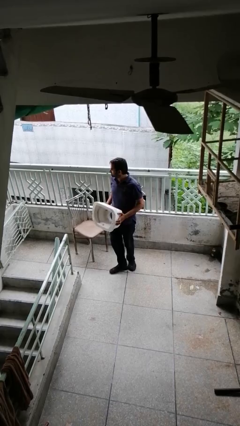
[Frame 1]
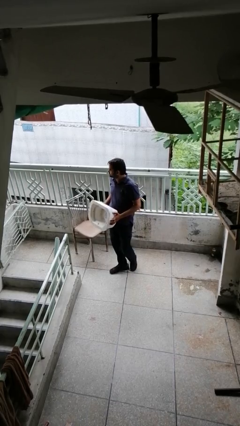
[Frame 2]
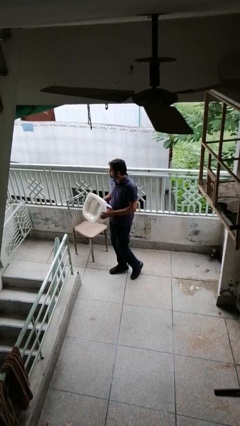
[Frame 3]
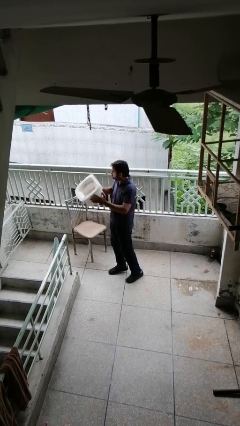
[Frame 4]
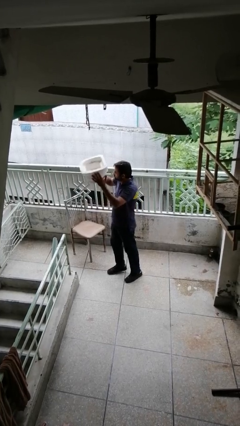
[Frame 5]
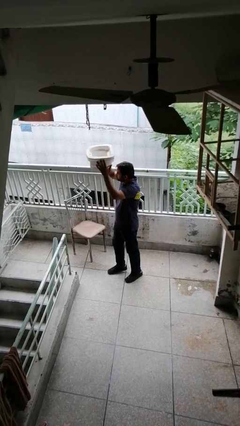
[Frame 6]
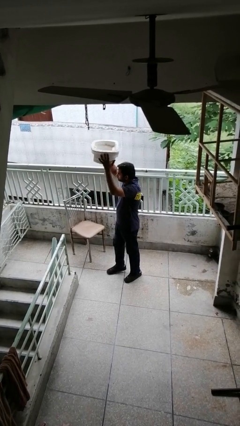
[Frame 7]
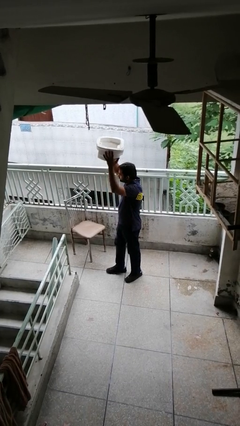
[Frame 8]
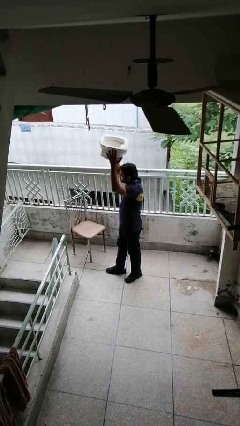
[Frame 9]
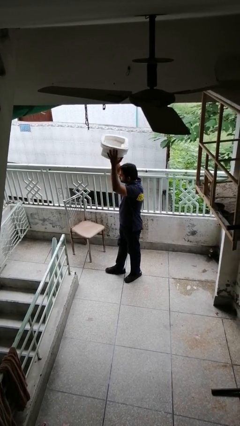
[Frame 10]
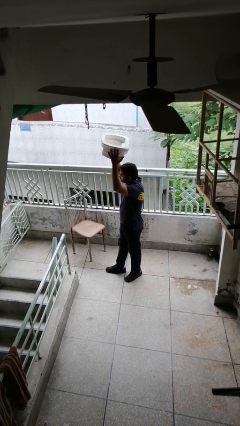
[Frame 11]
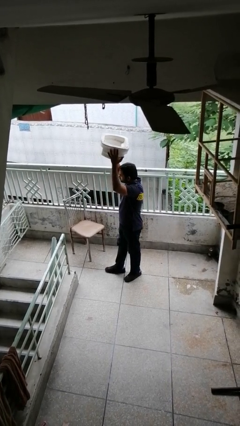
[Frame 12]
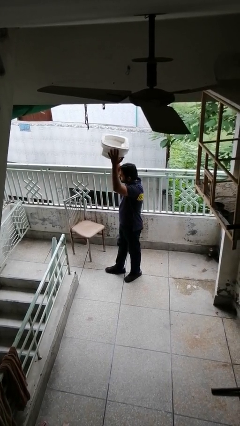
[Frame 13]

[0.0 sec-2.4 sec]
person holds object above head

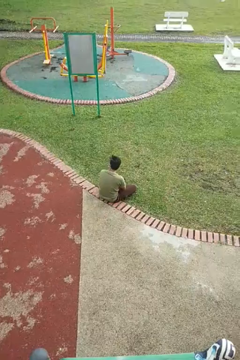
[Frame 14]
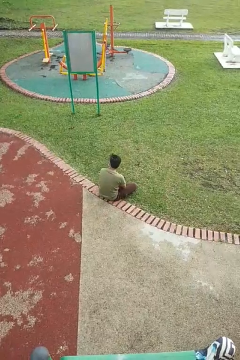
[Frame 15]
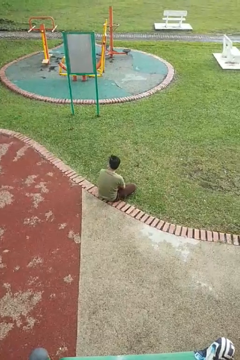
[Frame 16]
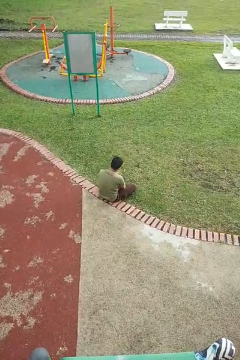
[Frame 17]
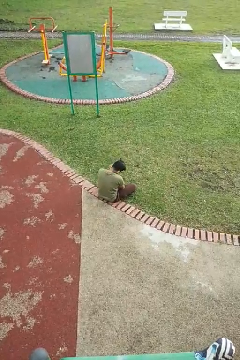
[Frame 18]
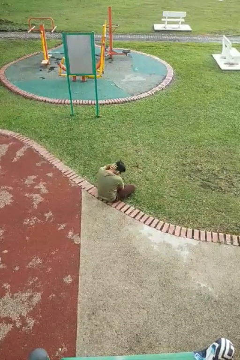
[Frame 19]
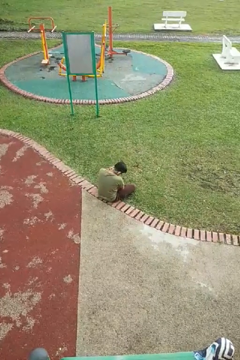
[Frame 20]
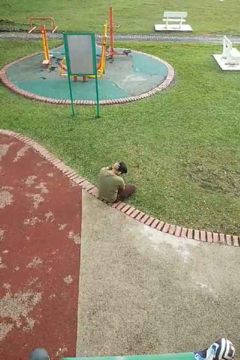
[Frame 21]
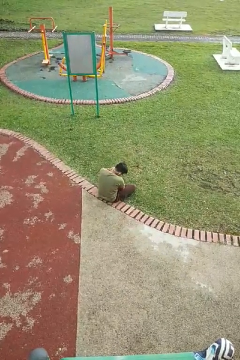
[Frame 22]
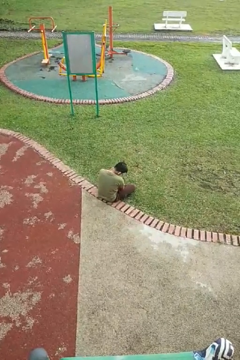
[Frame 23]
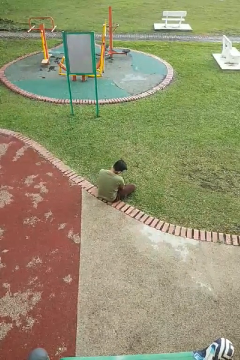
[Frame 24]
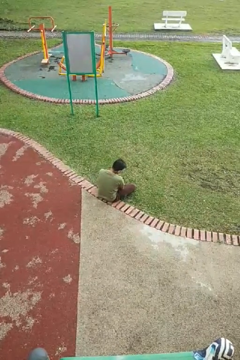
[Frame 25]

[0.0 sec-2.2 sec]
person rubs neck

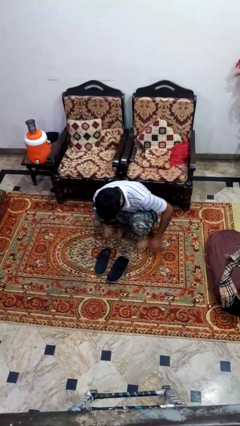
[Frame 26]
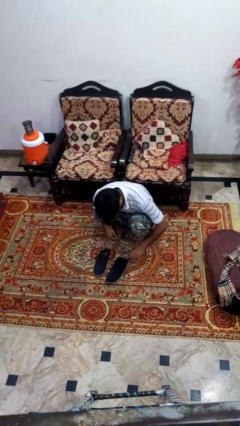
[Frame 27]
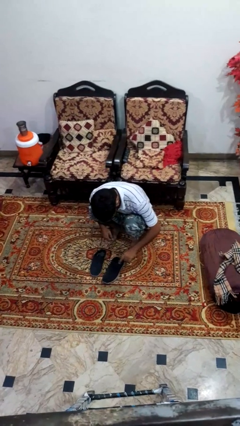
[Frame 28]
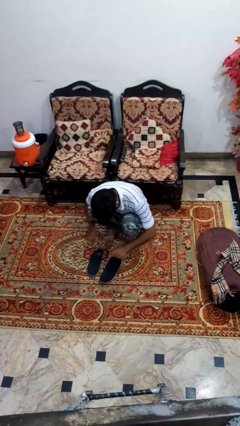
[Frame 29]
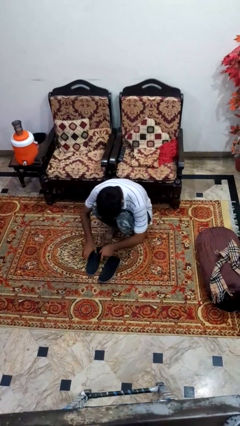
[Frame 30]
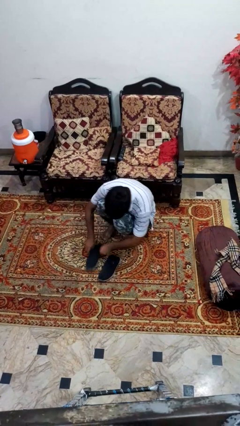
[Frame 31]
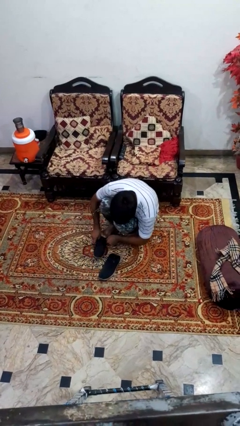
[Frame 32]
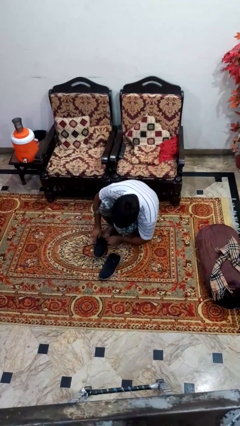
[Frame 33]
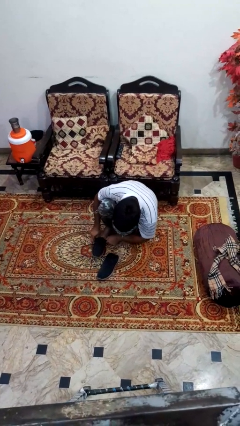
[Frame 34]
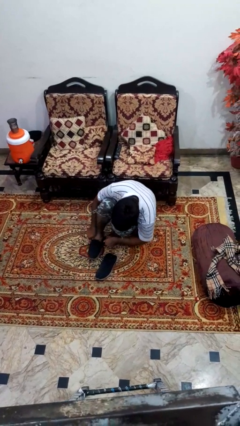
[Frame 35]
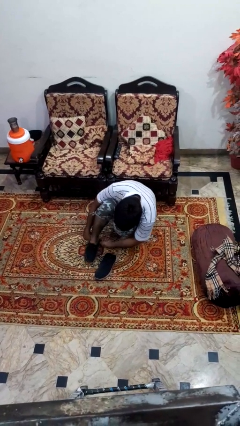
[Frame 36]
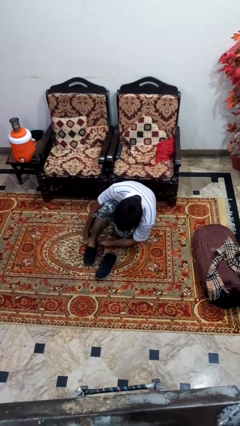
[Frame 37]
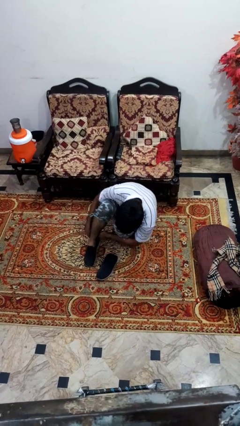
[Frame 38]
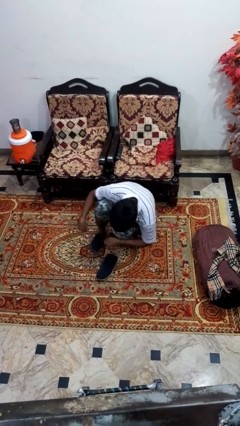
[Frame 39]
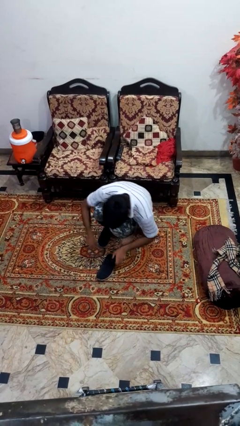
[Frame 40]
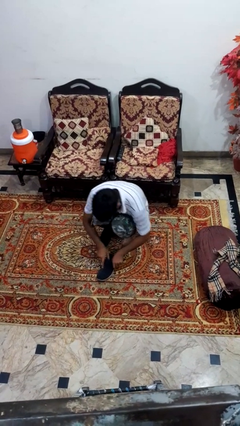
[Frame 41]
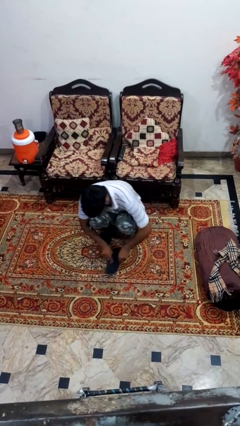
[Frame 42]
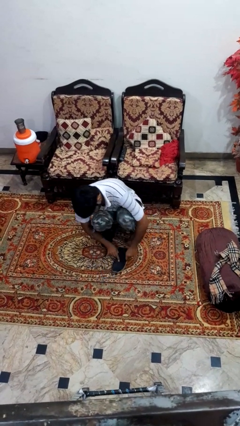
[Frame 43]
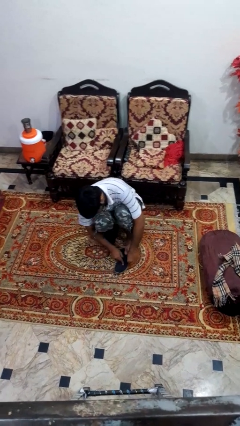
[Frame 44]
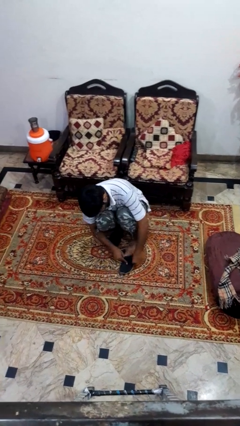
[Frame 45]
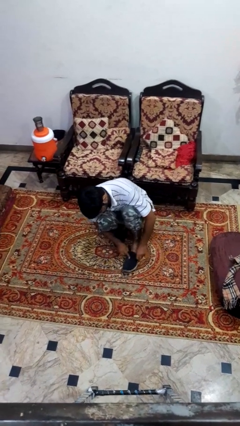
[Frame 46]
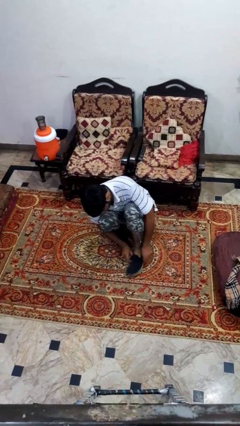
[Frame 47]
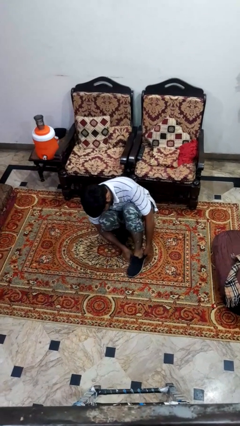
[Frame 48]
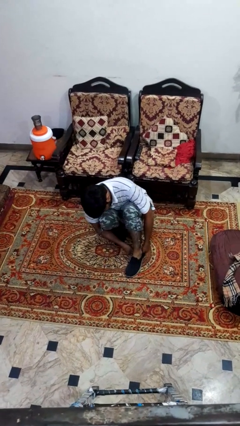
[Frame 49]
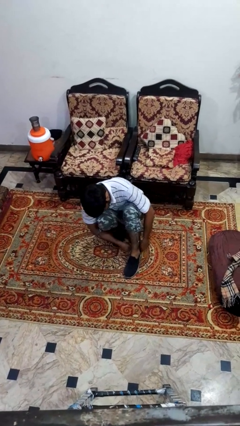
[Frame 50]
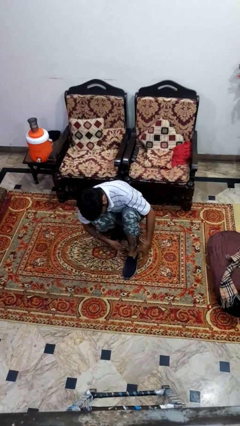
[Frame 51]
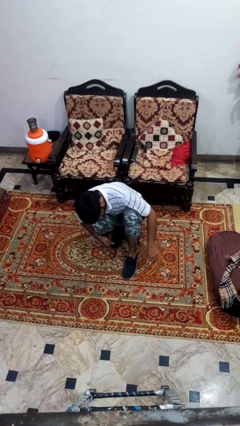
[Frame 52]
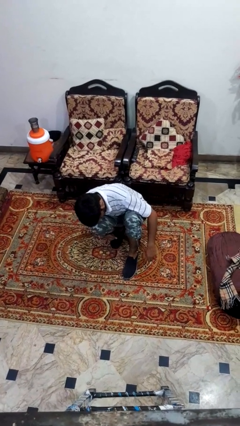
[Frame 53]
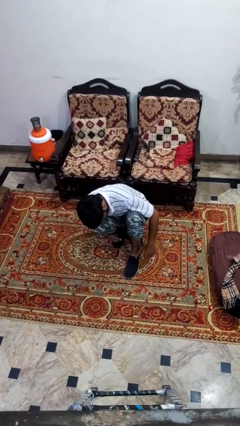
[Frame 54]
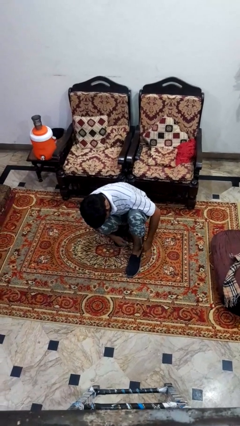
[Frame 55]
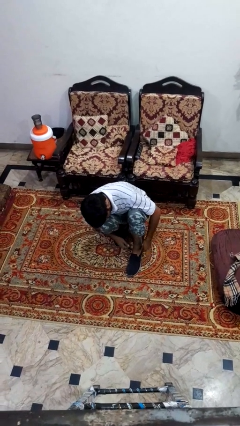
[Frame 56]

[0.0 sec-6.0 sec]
person puts on shoes

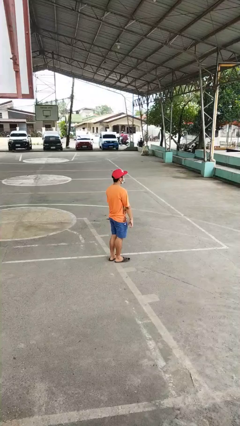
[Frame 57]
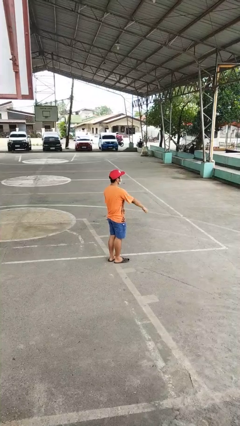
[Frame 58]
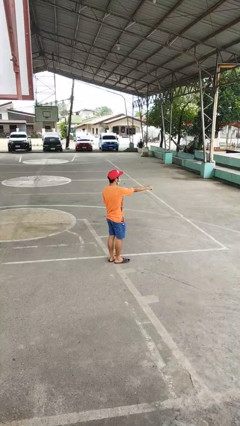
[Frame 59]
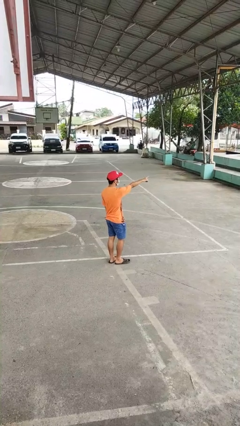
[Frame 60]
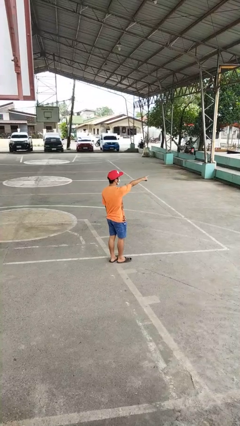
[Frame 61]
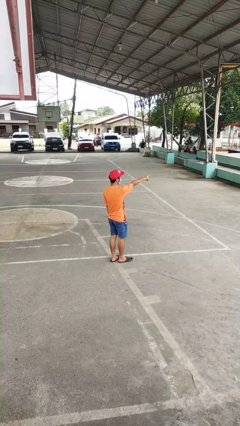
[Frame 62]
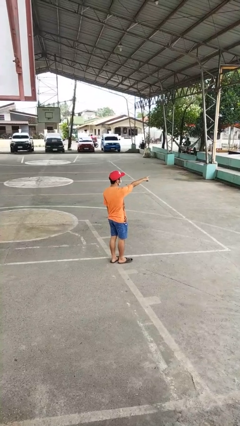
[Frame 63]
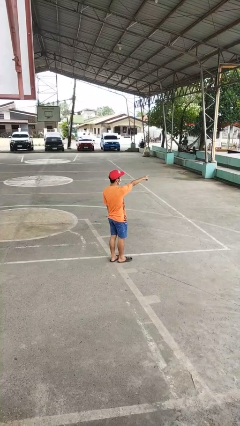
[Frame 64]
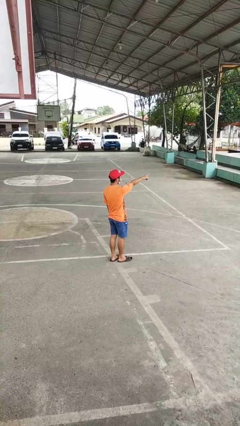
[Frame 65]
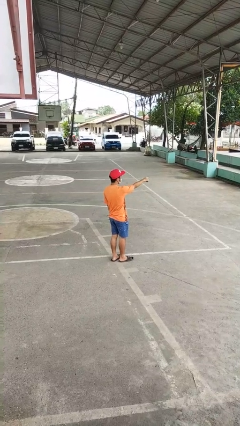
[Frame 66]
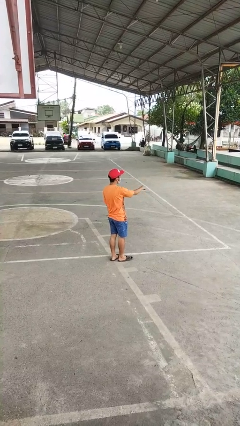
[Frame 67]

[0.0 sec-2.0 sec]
person points at person

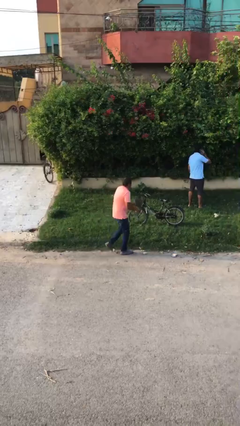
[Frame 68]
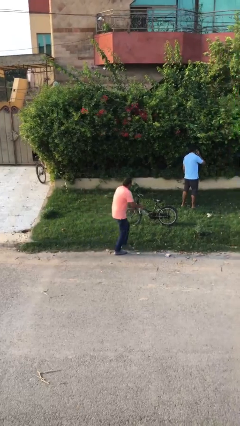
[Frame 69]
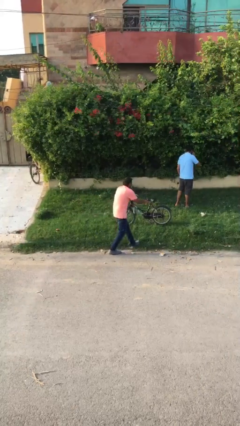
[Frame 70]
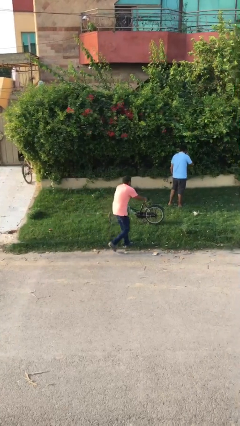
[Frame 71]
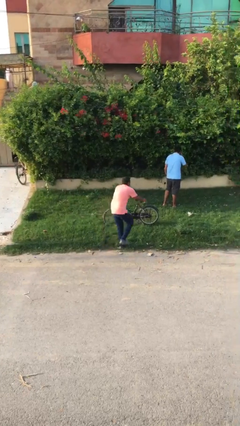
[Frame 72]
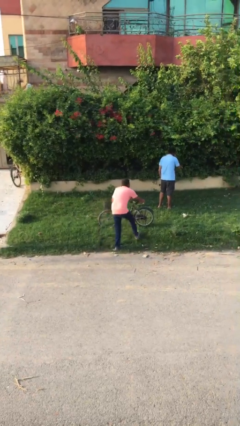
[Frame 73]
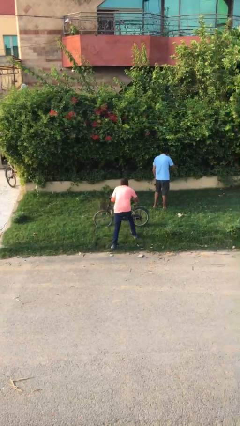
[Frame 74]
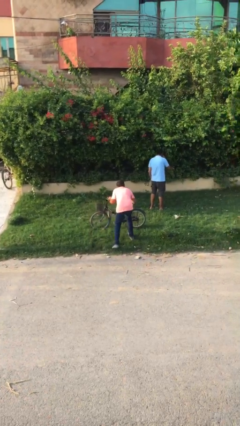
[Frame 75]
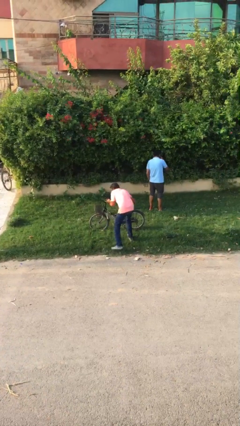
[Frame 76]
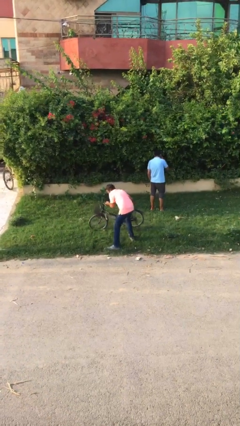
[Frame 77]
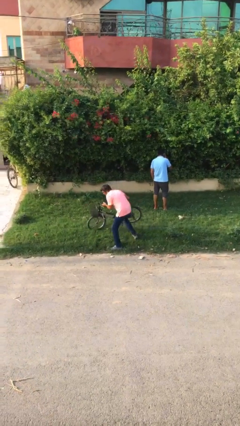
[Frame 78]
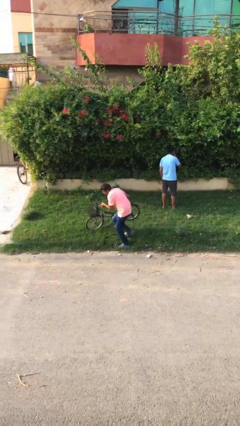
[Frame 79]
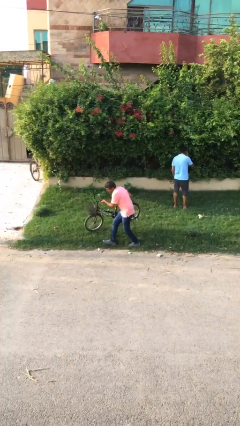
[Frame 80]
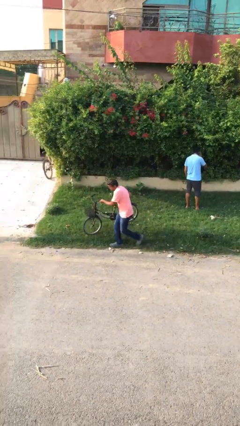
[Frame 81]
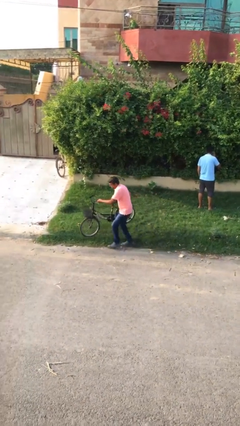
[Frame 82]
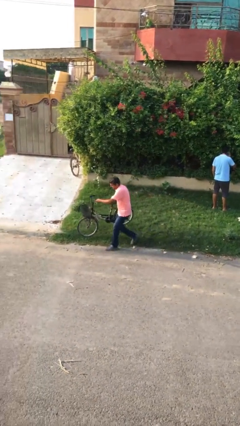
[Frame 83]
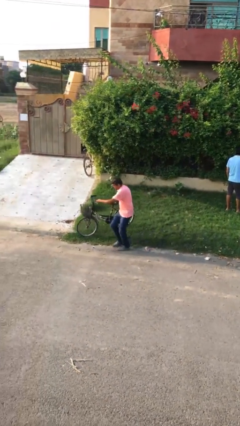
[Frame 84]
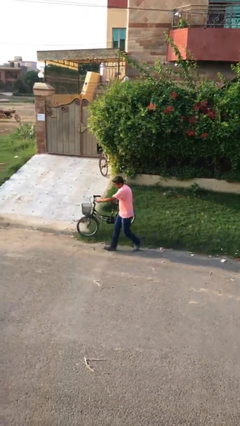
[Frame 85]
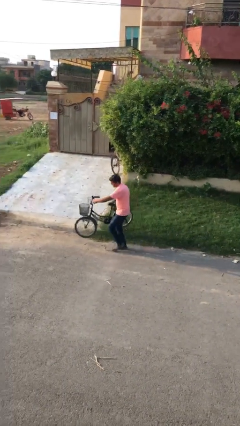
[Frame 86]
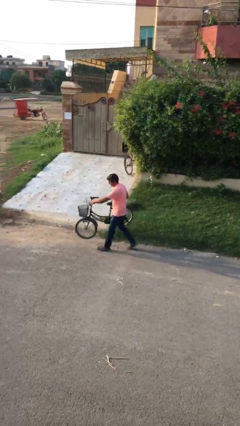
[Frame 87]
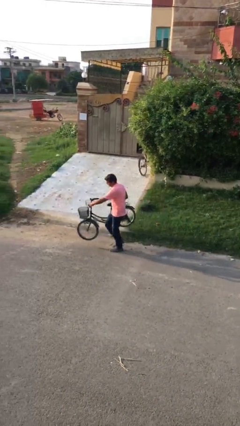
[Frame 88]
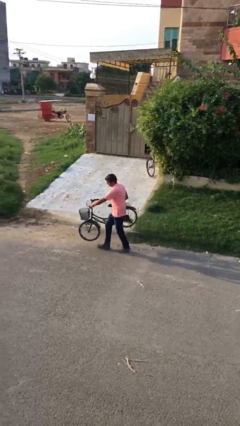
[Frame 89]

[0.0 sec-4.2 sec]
person steals object from person

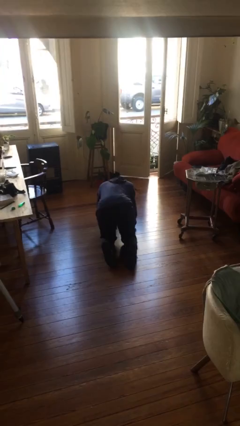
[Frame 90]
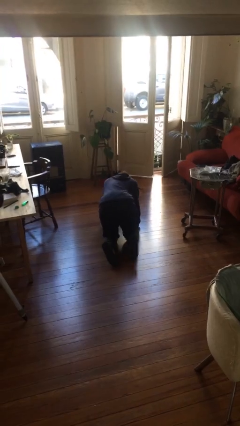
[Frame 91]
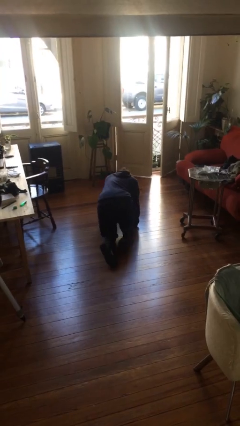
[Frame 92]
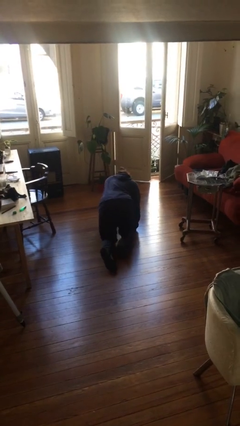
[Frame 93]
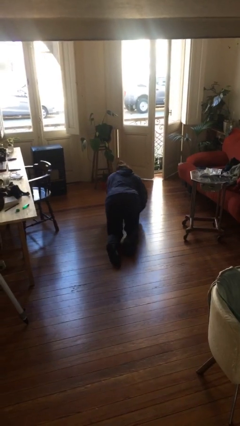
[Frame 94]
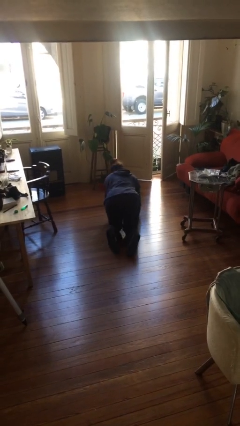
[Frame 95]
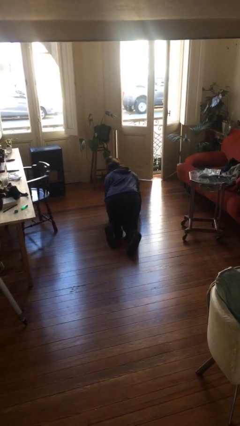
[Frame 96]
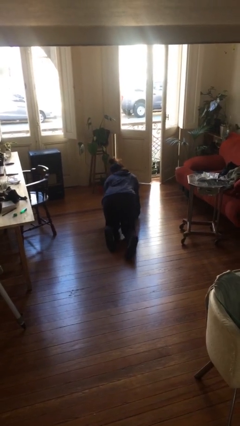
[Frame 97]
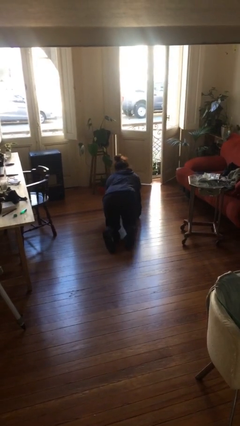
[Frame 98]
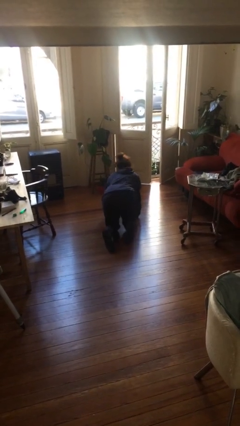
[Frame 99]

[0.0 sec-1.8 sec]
person crawls
